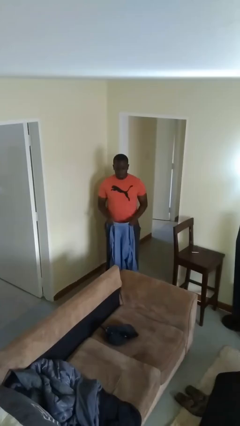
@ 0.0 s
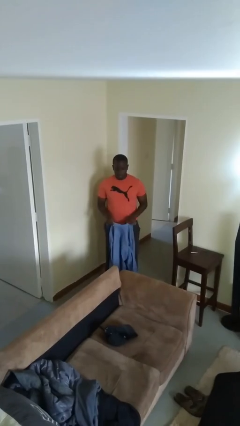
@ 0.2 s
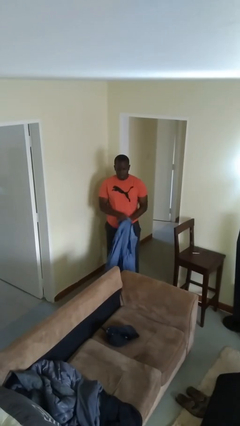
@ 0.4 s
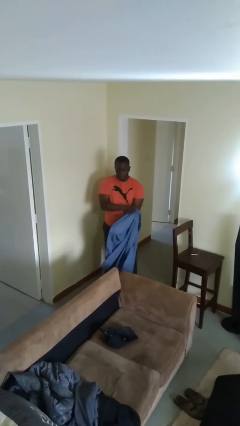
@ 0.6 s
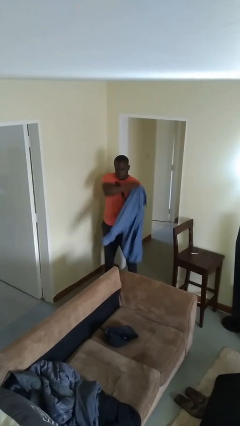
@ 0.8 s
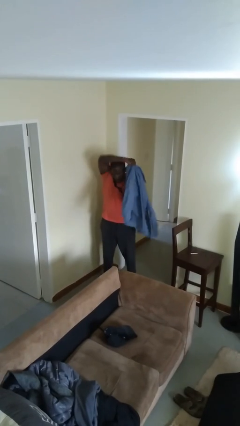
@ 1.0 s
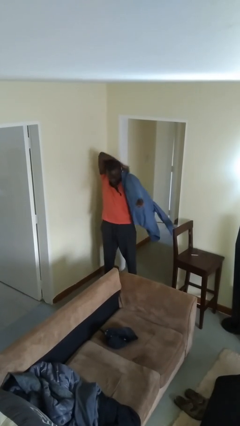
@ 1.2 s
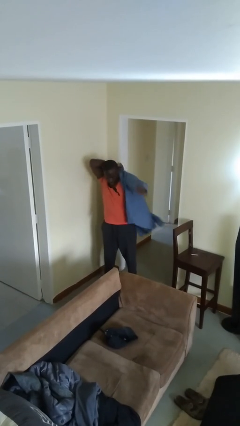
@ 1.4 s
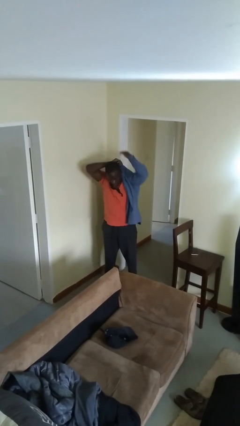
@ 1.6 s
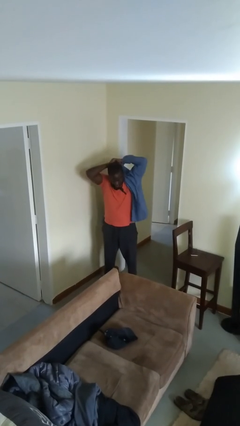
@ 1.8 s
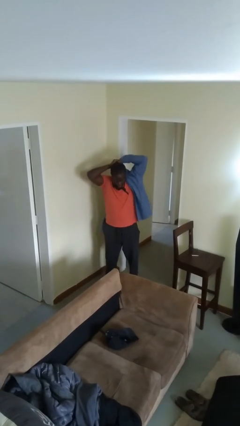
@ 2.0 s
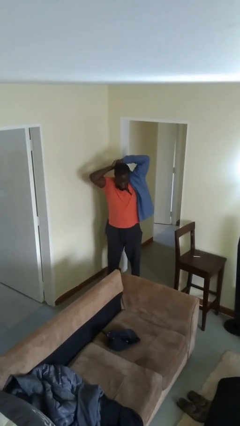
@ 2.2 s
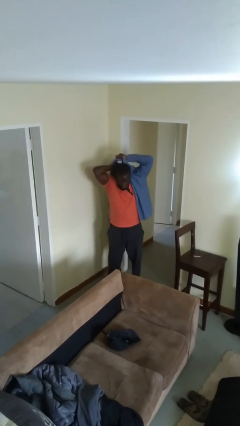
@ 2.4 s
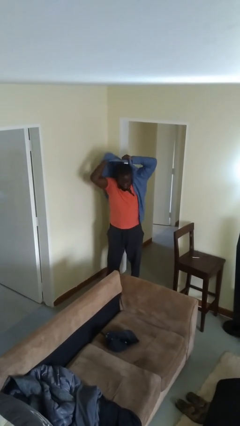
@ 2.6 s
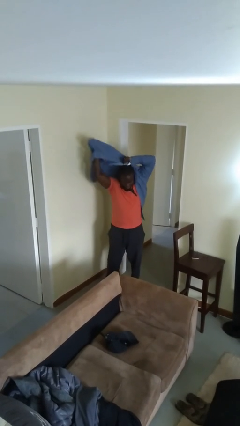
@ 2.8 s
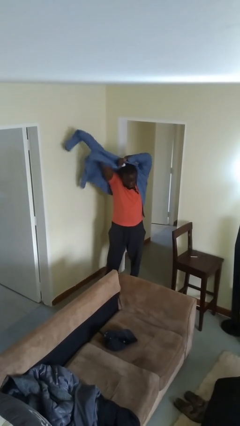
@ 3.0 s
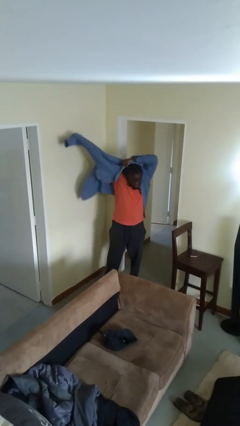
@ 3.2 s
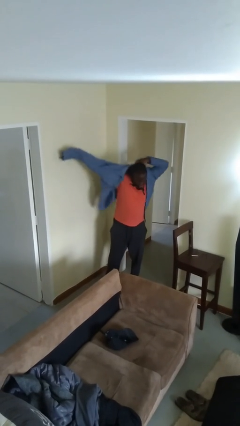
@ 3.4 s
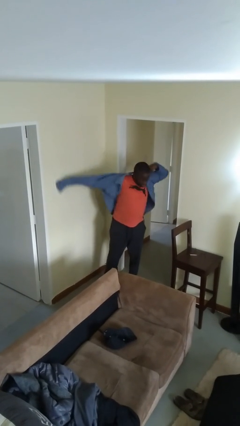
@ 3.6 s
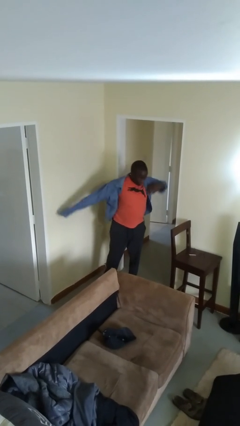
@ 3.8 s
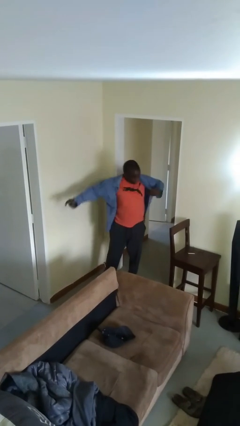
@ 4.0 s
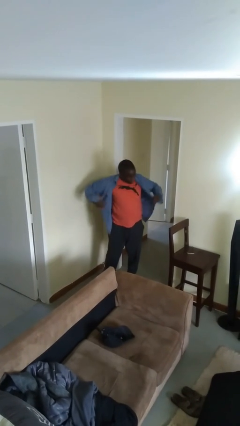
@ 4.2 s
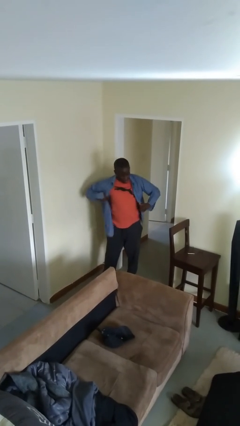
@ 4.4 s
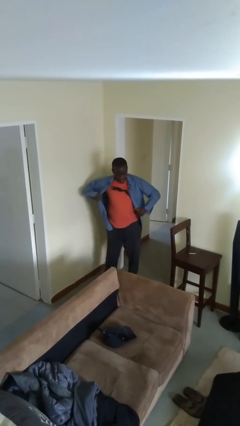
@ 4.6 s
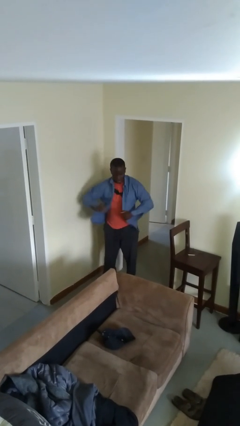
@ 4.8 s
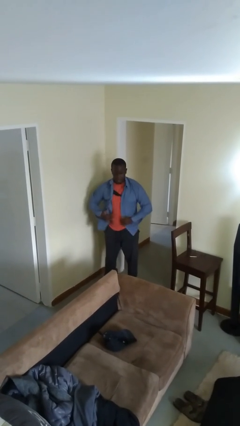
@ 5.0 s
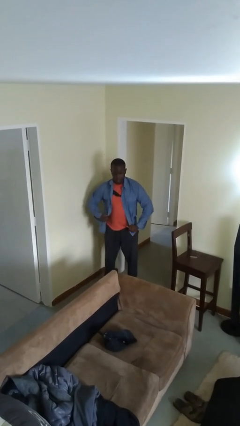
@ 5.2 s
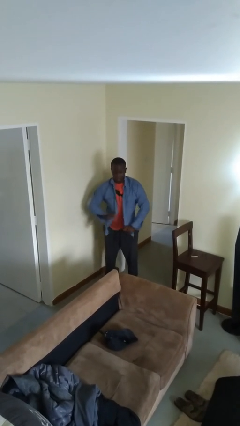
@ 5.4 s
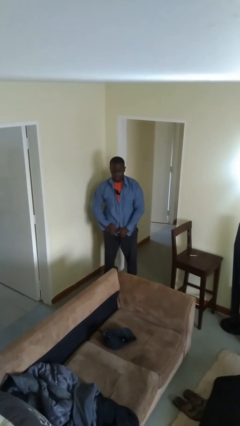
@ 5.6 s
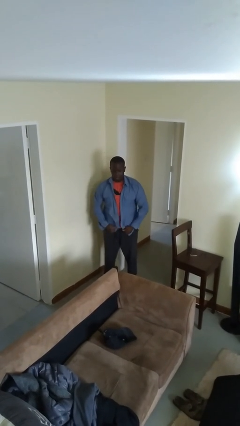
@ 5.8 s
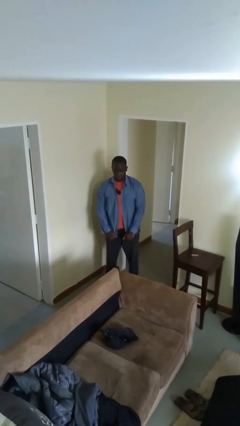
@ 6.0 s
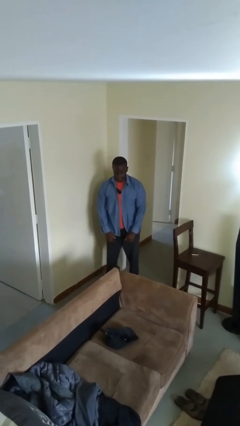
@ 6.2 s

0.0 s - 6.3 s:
person puts on shirt

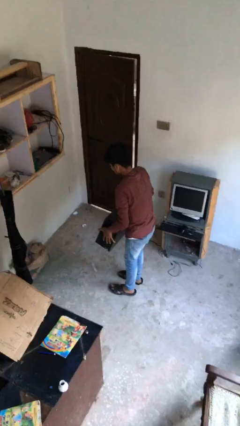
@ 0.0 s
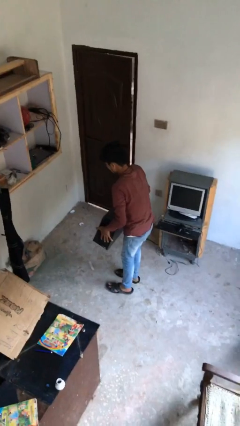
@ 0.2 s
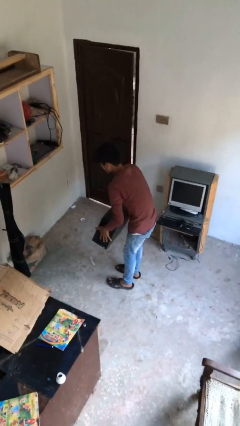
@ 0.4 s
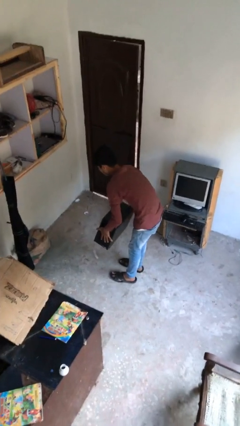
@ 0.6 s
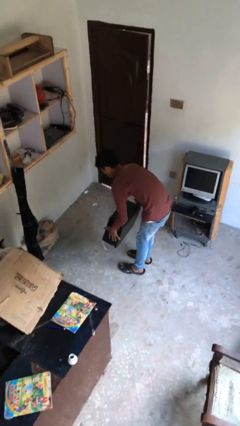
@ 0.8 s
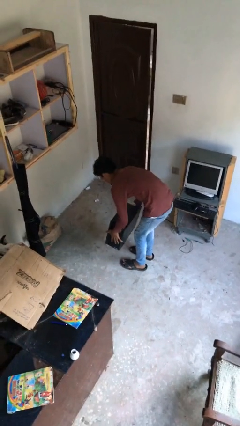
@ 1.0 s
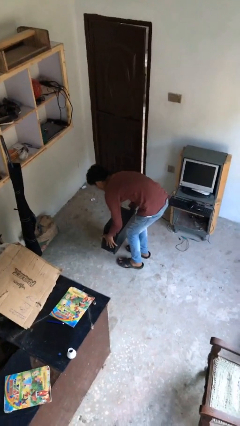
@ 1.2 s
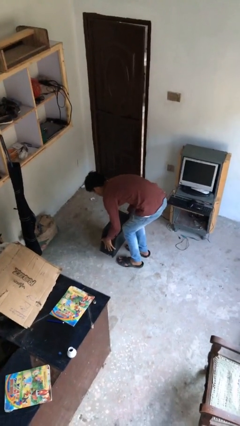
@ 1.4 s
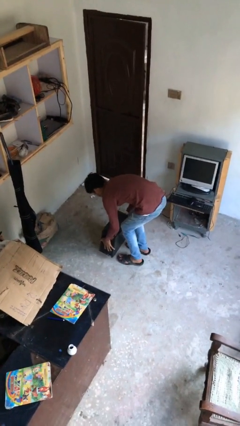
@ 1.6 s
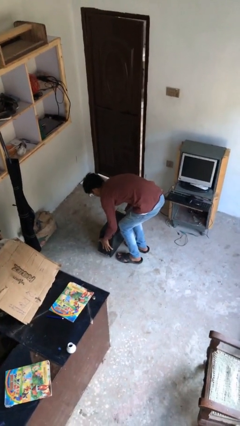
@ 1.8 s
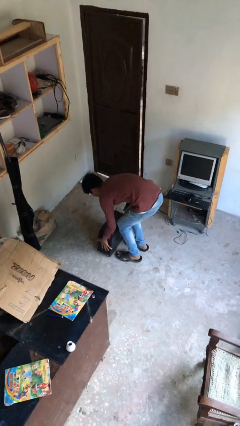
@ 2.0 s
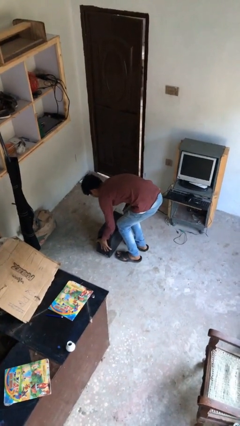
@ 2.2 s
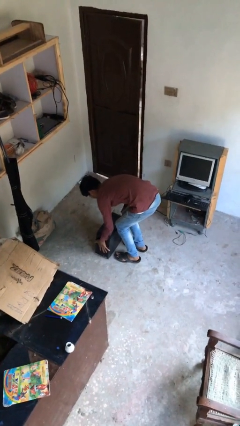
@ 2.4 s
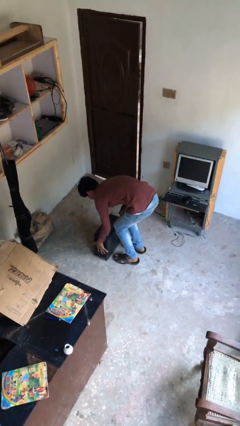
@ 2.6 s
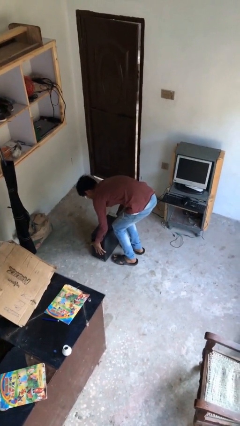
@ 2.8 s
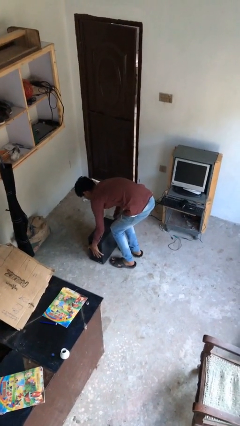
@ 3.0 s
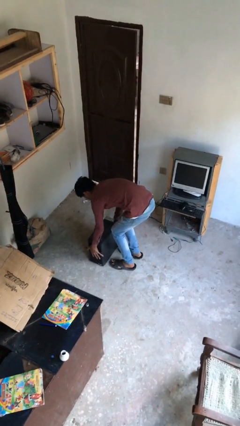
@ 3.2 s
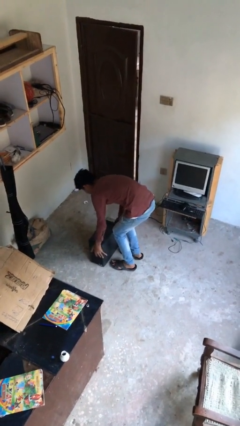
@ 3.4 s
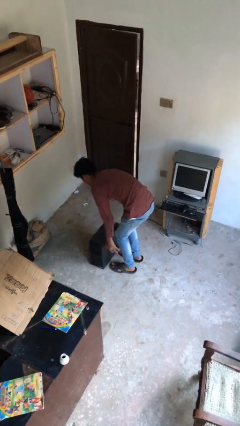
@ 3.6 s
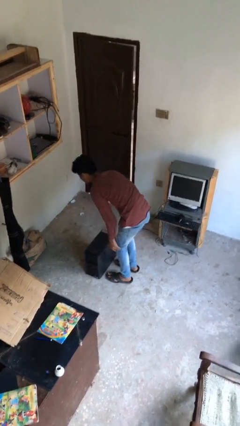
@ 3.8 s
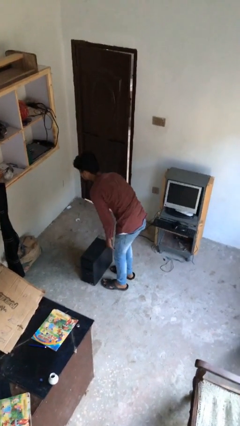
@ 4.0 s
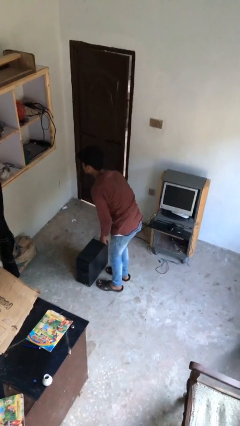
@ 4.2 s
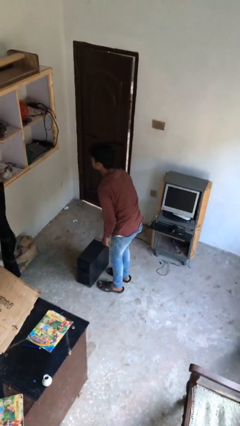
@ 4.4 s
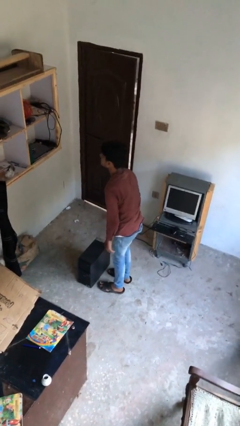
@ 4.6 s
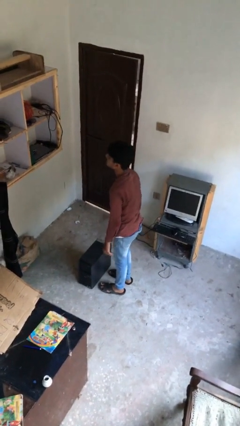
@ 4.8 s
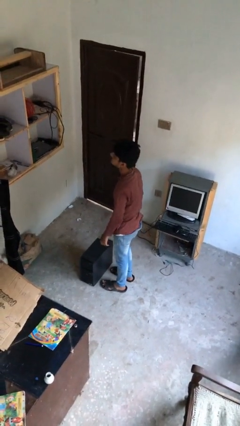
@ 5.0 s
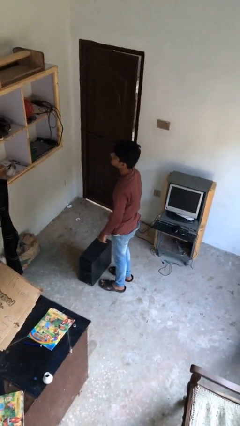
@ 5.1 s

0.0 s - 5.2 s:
person puts down object on floor

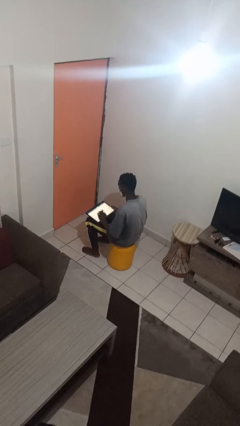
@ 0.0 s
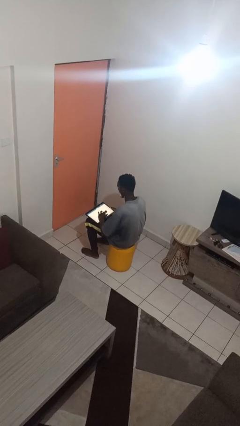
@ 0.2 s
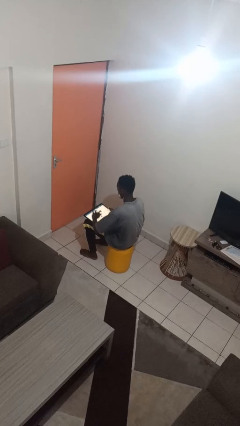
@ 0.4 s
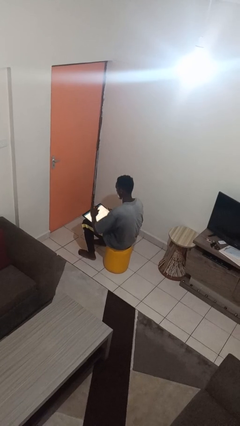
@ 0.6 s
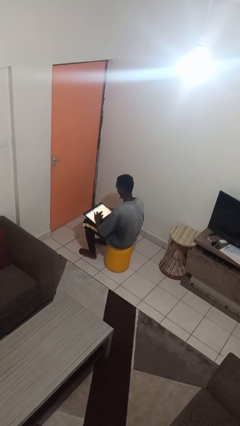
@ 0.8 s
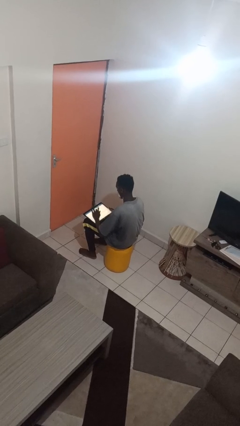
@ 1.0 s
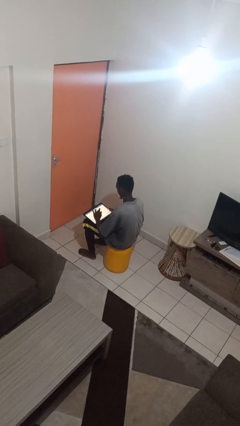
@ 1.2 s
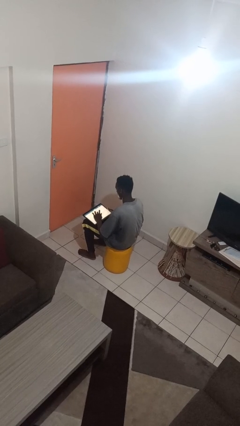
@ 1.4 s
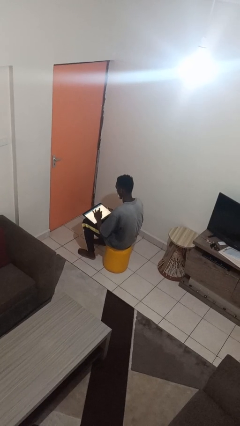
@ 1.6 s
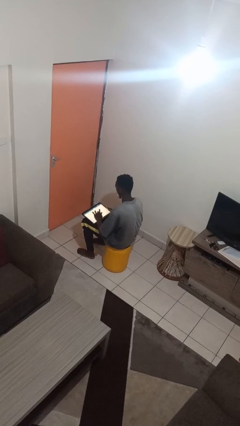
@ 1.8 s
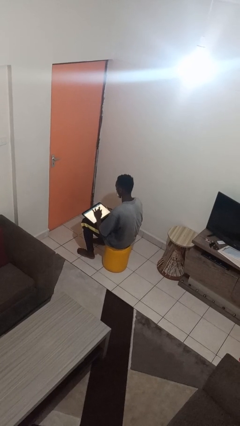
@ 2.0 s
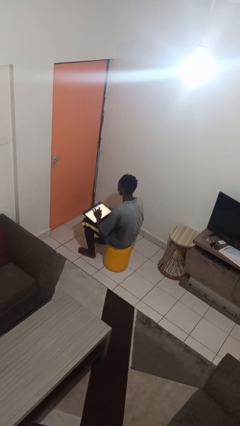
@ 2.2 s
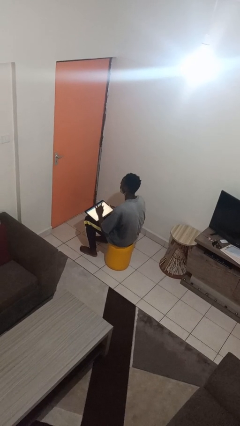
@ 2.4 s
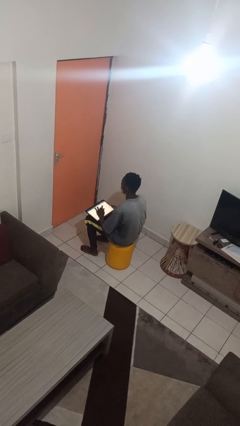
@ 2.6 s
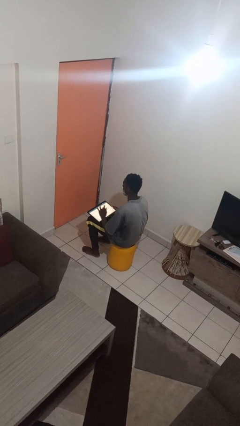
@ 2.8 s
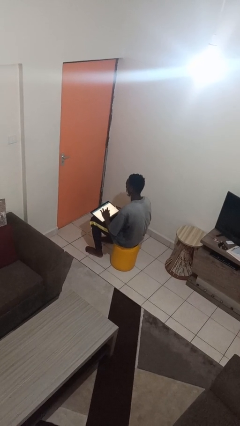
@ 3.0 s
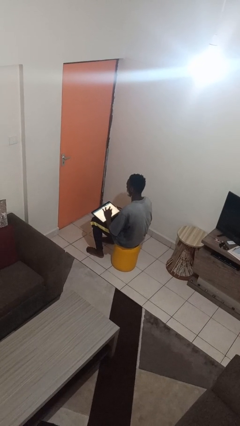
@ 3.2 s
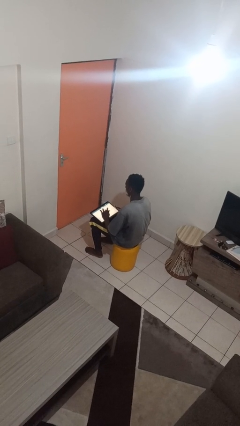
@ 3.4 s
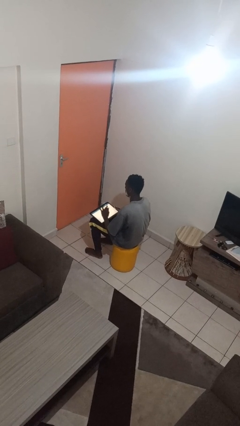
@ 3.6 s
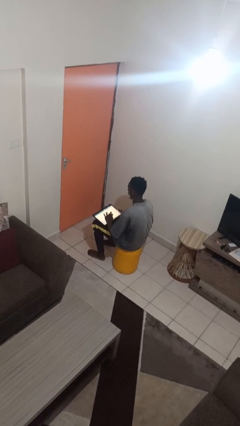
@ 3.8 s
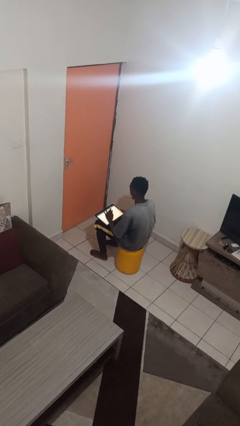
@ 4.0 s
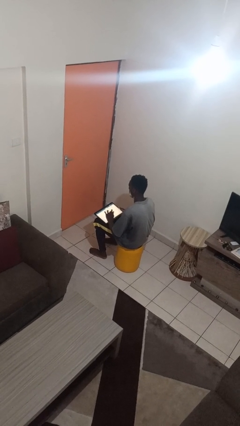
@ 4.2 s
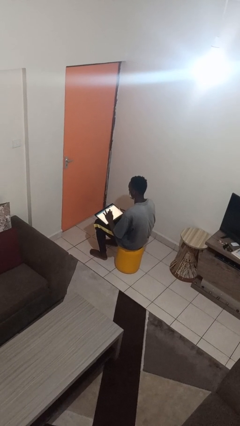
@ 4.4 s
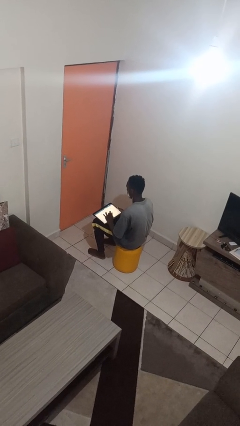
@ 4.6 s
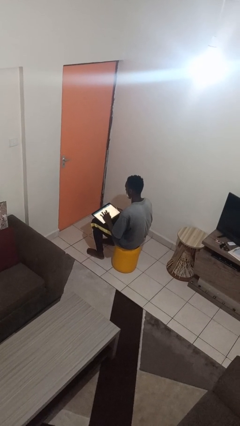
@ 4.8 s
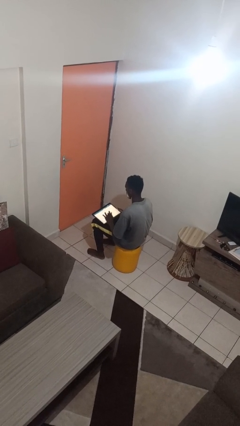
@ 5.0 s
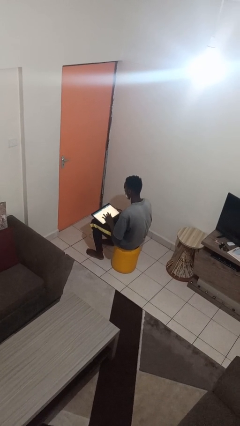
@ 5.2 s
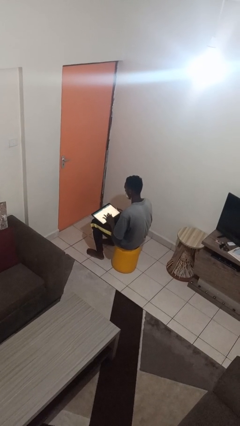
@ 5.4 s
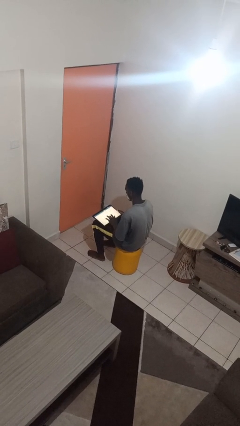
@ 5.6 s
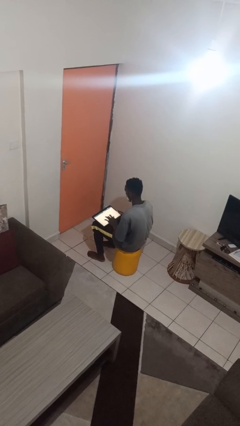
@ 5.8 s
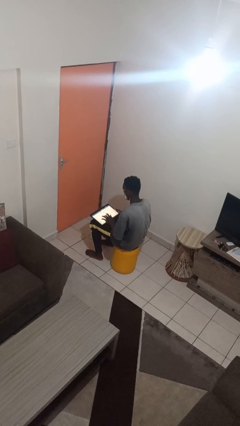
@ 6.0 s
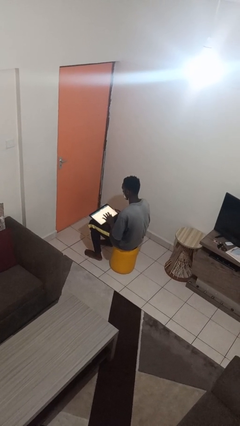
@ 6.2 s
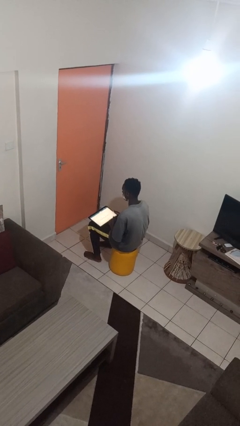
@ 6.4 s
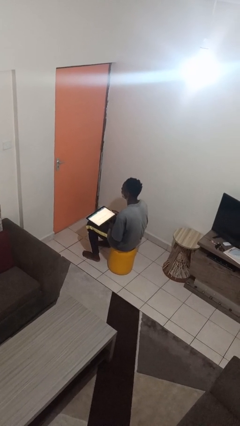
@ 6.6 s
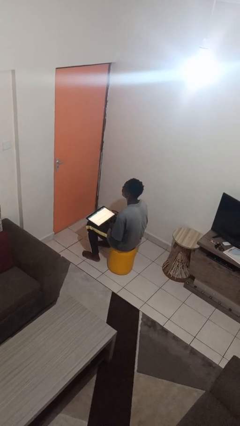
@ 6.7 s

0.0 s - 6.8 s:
person interacts with tablet
